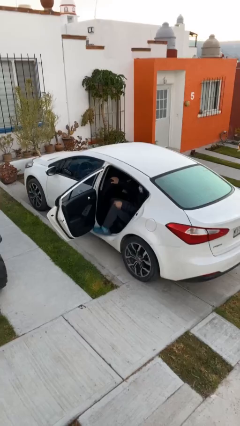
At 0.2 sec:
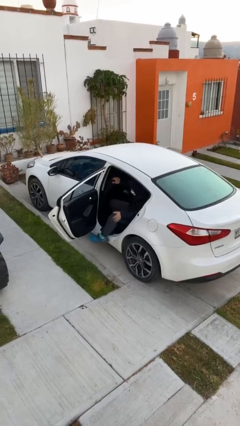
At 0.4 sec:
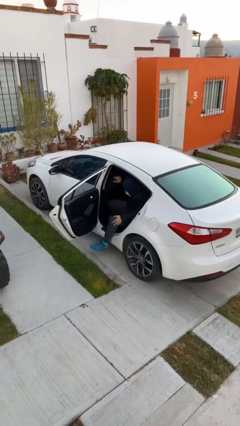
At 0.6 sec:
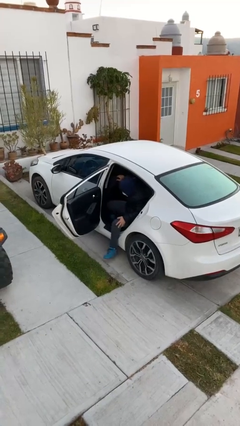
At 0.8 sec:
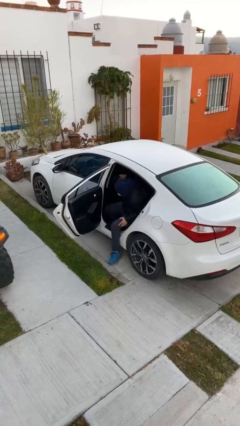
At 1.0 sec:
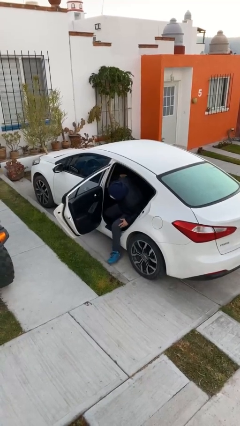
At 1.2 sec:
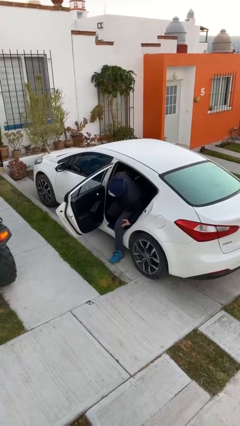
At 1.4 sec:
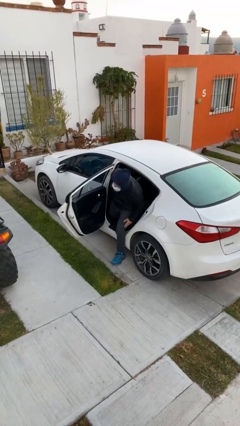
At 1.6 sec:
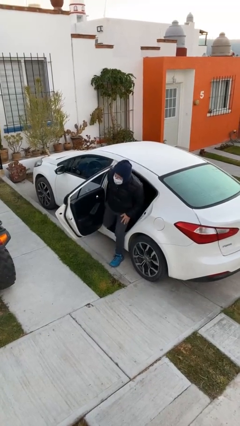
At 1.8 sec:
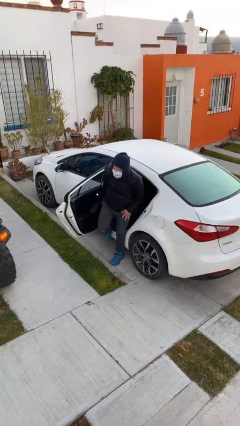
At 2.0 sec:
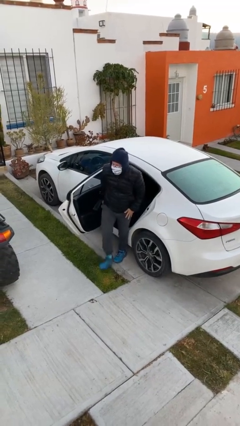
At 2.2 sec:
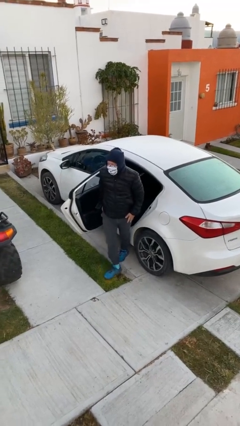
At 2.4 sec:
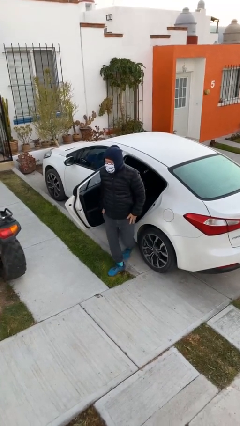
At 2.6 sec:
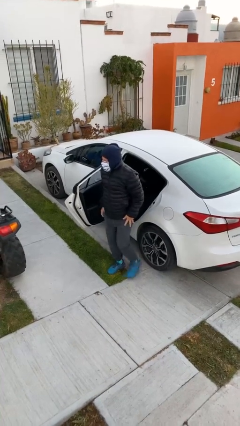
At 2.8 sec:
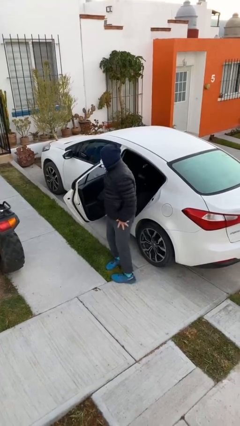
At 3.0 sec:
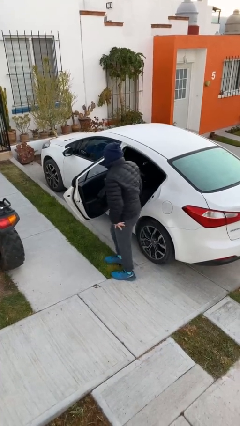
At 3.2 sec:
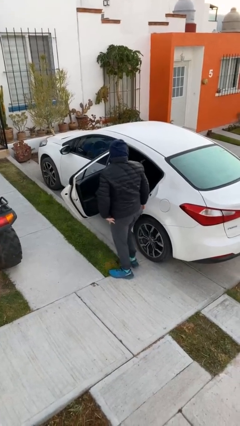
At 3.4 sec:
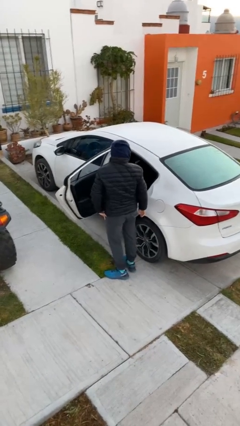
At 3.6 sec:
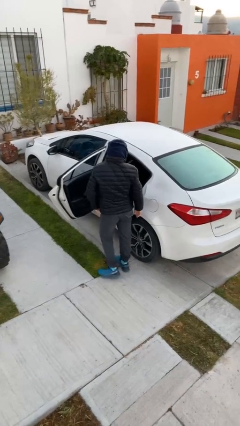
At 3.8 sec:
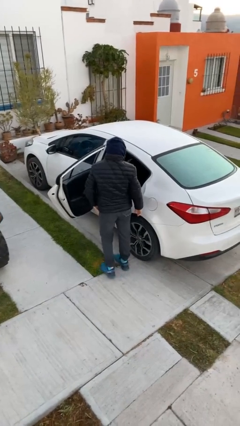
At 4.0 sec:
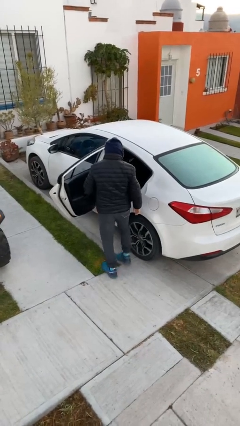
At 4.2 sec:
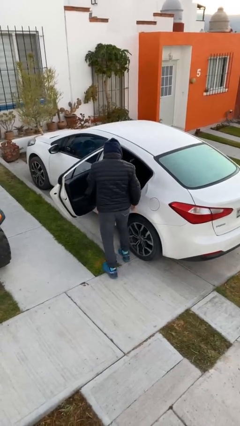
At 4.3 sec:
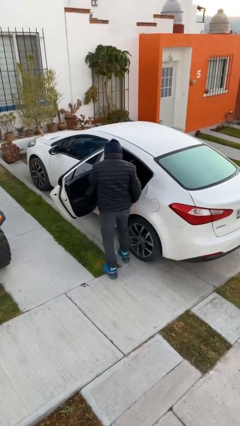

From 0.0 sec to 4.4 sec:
person exits car

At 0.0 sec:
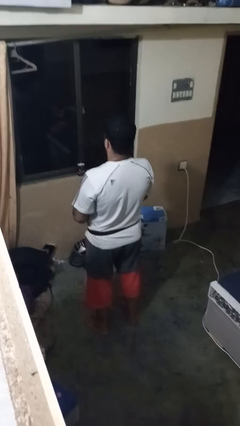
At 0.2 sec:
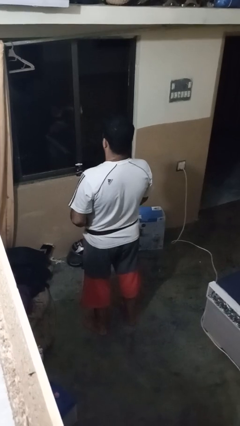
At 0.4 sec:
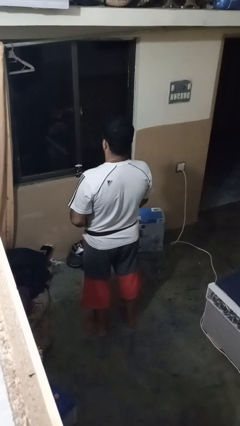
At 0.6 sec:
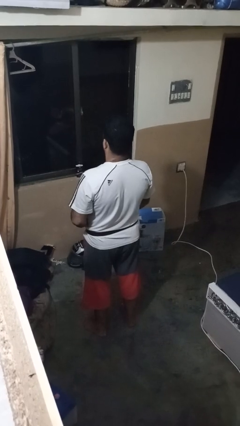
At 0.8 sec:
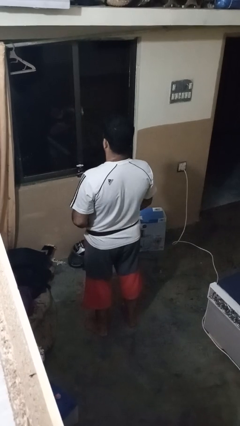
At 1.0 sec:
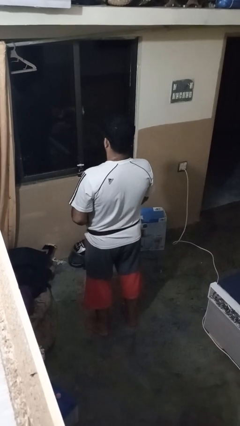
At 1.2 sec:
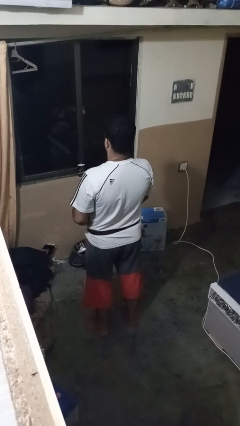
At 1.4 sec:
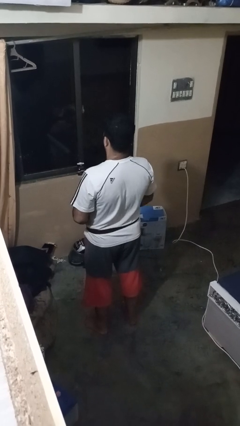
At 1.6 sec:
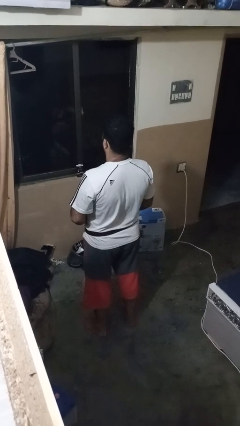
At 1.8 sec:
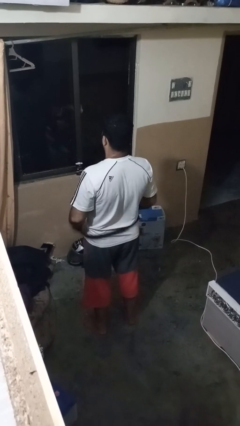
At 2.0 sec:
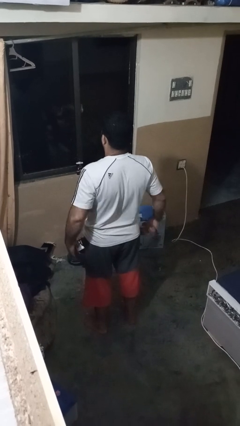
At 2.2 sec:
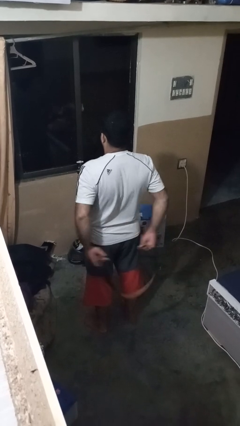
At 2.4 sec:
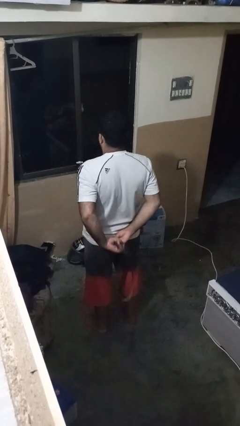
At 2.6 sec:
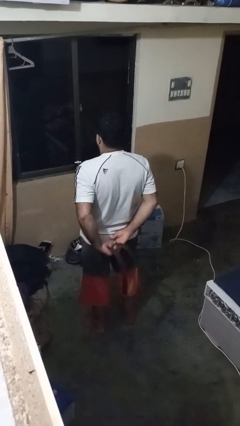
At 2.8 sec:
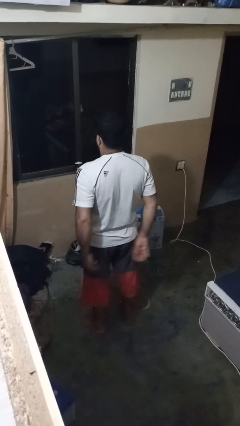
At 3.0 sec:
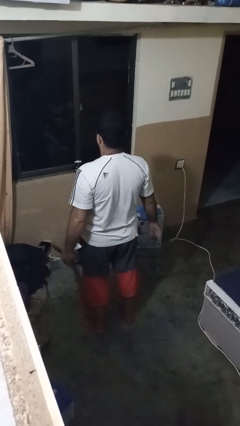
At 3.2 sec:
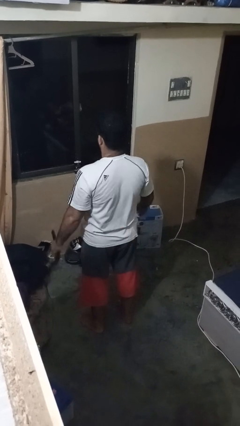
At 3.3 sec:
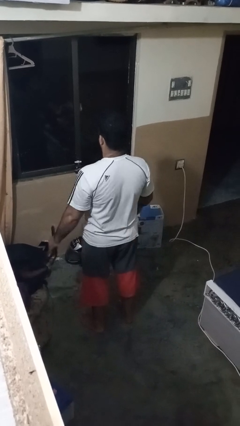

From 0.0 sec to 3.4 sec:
person takes off belt

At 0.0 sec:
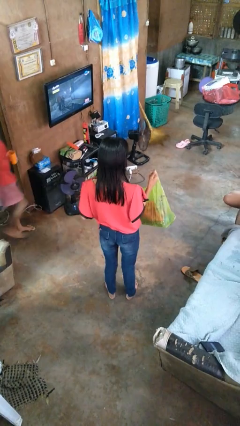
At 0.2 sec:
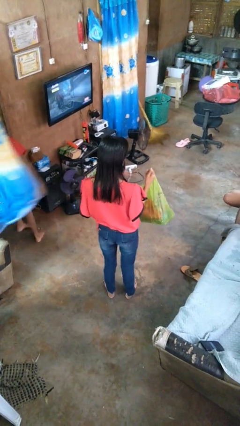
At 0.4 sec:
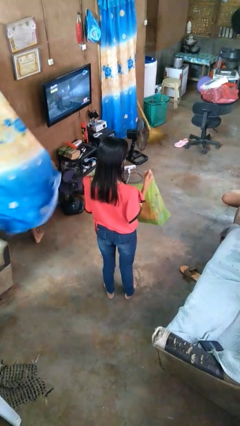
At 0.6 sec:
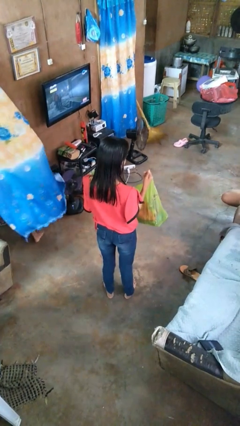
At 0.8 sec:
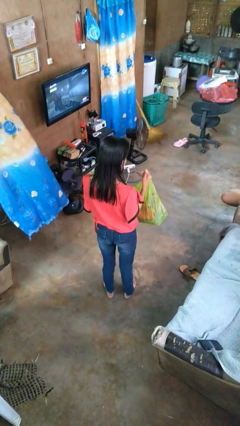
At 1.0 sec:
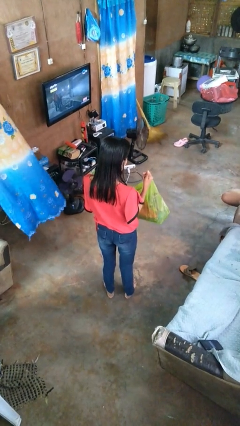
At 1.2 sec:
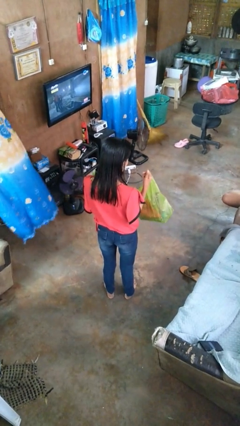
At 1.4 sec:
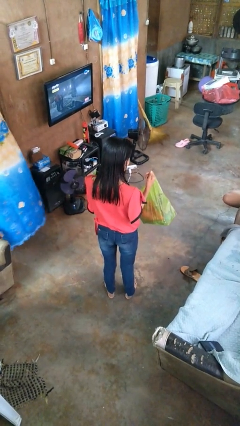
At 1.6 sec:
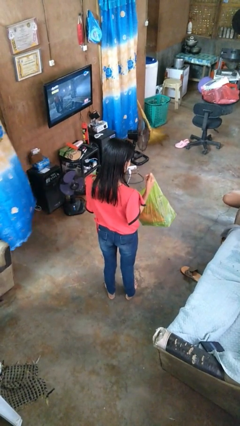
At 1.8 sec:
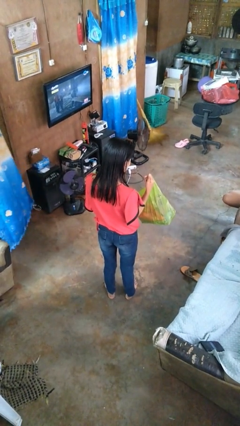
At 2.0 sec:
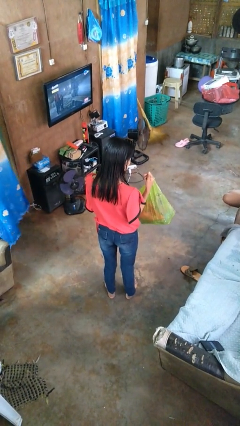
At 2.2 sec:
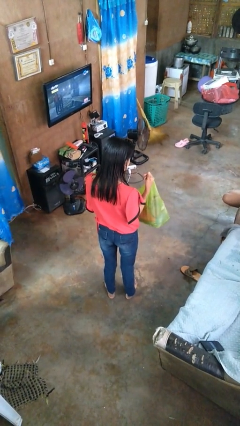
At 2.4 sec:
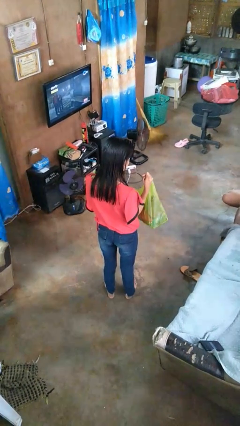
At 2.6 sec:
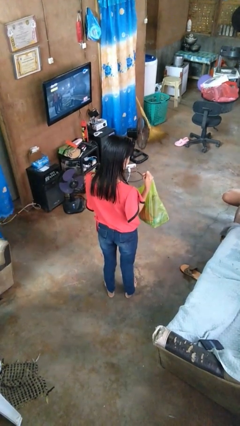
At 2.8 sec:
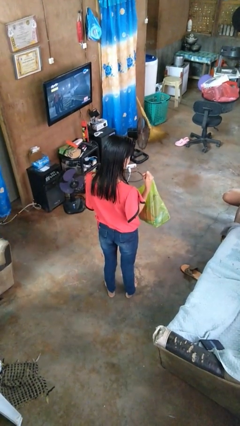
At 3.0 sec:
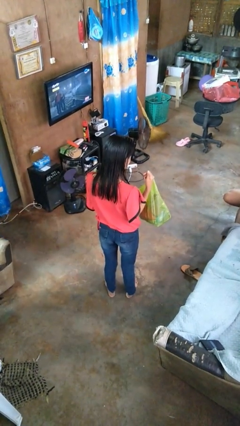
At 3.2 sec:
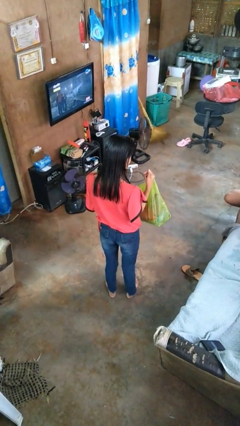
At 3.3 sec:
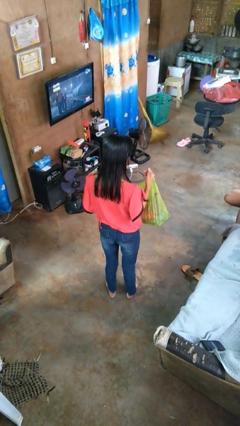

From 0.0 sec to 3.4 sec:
person searches in bag

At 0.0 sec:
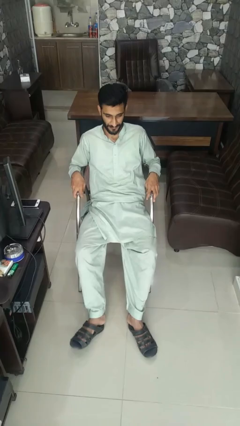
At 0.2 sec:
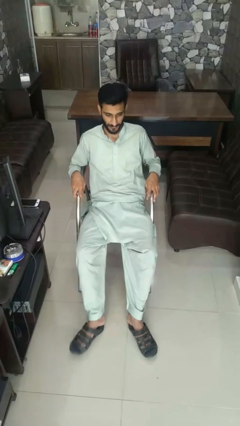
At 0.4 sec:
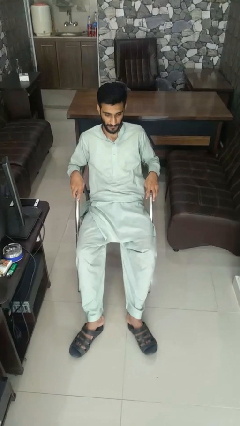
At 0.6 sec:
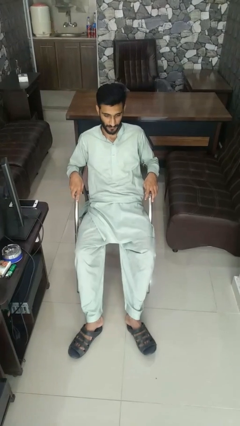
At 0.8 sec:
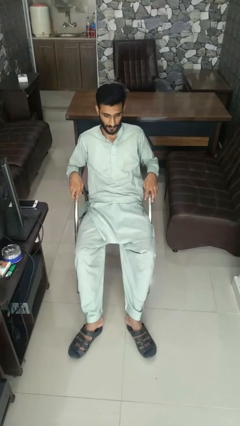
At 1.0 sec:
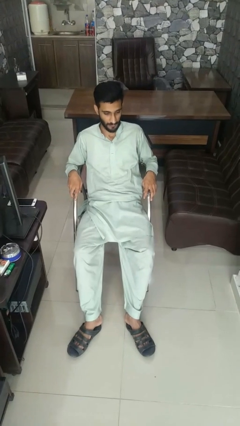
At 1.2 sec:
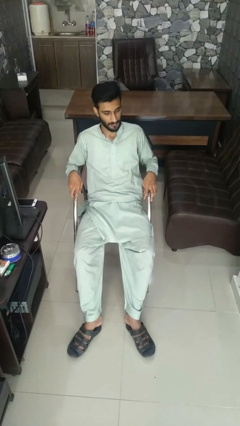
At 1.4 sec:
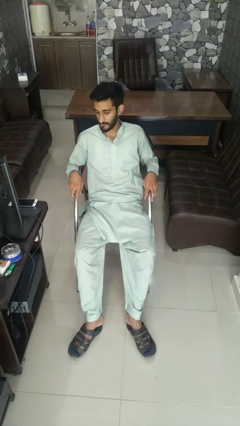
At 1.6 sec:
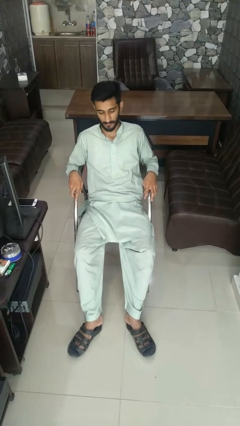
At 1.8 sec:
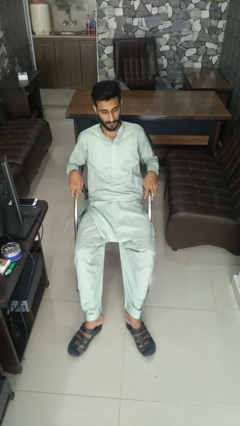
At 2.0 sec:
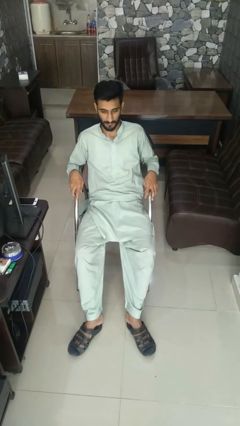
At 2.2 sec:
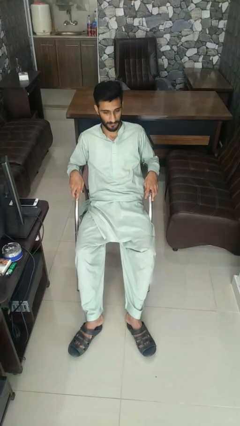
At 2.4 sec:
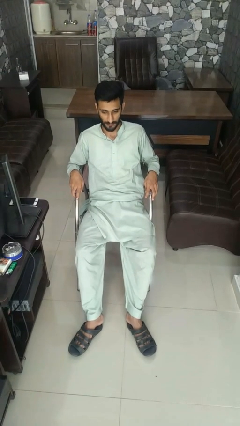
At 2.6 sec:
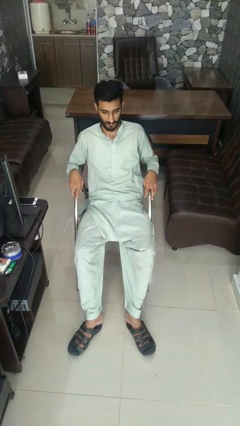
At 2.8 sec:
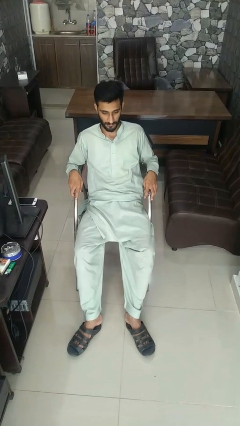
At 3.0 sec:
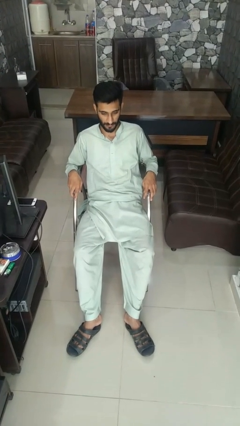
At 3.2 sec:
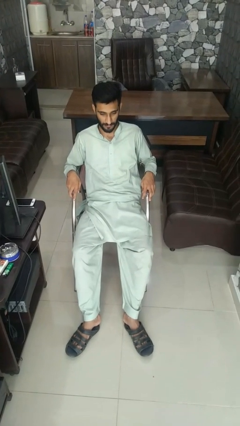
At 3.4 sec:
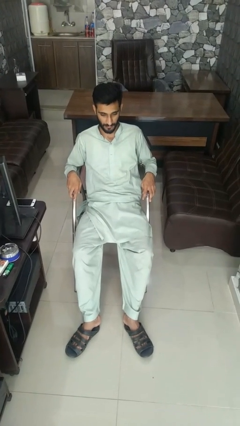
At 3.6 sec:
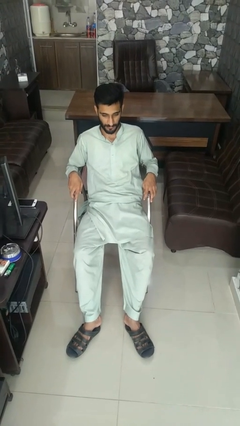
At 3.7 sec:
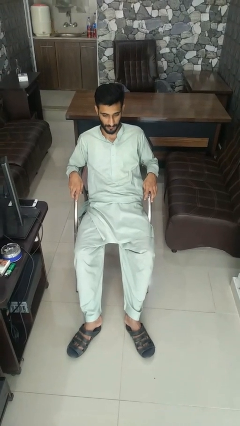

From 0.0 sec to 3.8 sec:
person shakes head

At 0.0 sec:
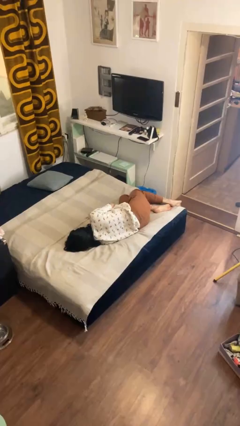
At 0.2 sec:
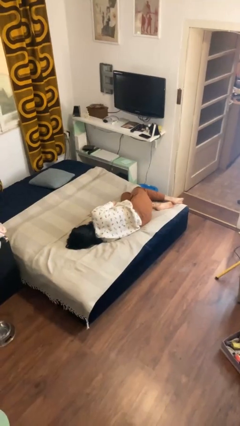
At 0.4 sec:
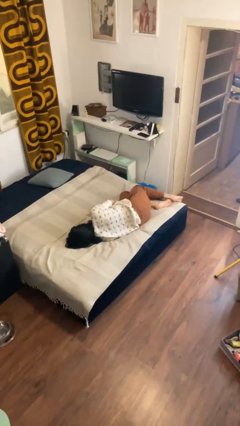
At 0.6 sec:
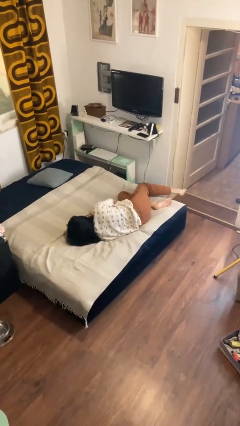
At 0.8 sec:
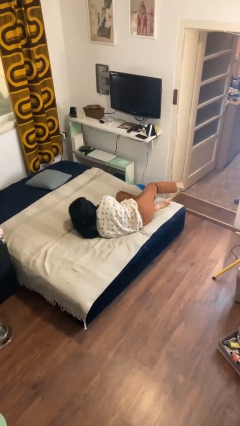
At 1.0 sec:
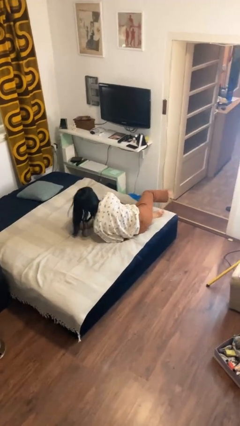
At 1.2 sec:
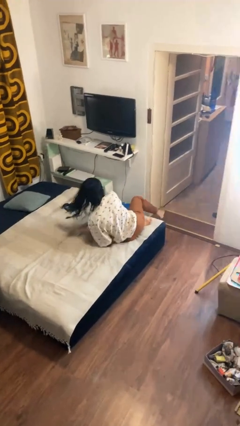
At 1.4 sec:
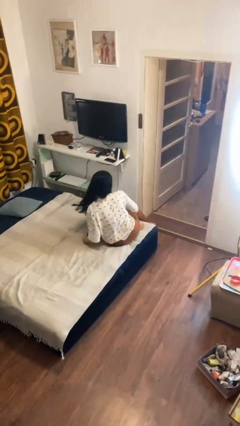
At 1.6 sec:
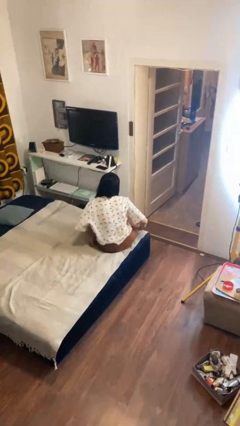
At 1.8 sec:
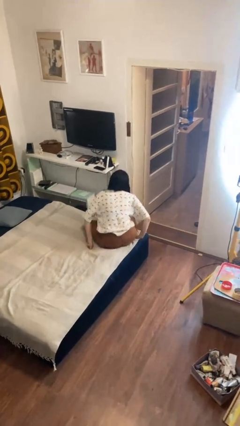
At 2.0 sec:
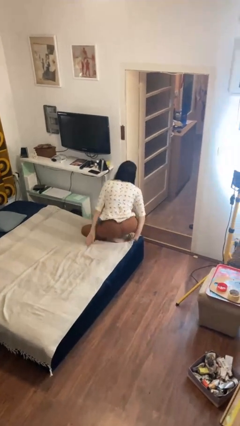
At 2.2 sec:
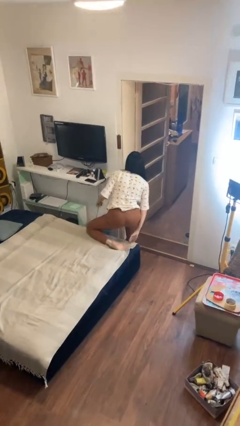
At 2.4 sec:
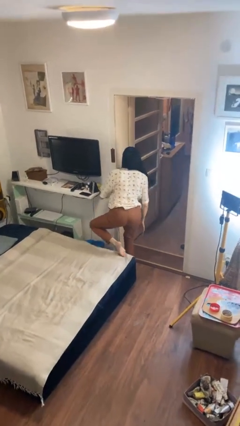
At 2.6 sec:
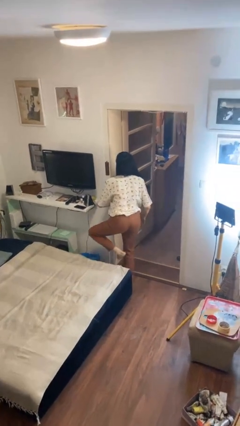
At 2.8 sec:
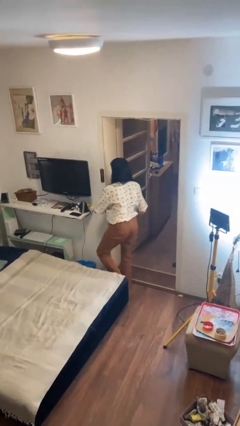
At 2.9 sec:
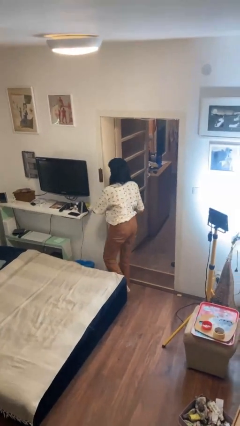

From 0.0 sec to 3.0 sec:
person stands up
